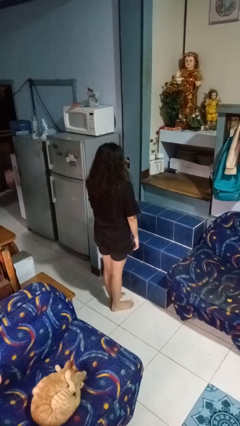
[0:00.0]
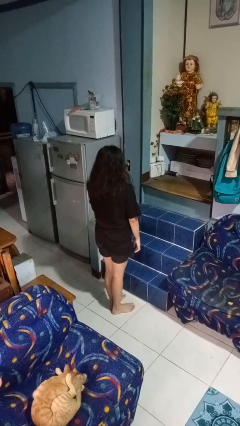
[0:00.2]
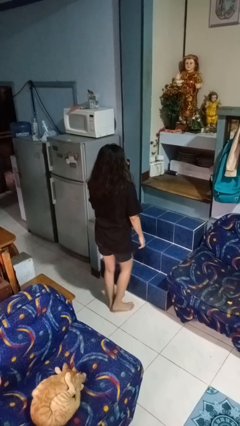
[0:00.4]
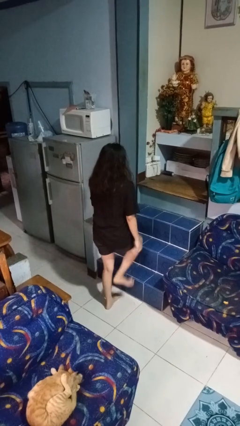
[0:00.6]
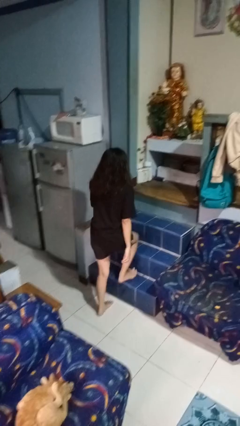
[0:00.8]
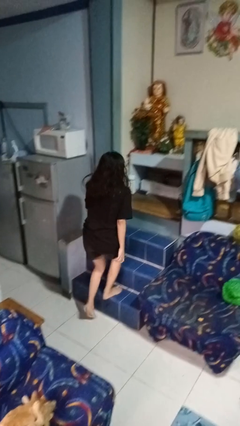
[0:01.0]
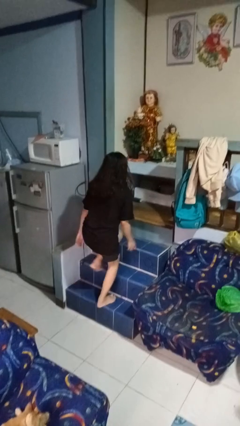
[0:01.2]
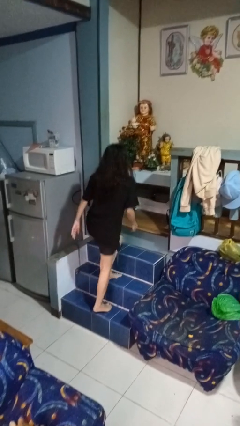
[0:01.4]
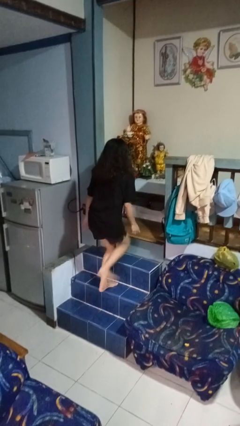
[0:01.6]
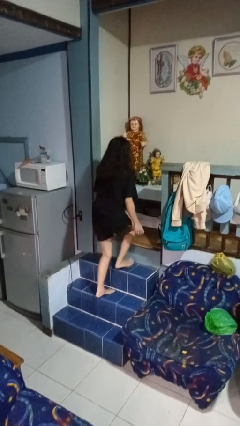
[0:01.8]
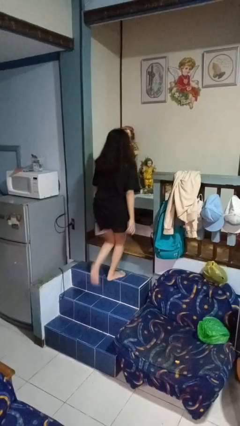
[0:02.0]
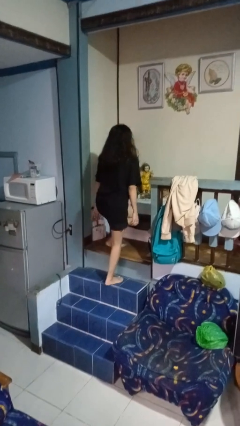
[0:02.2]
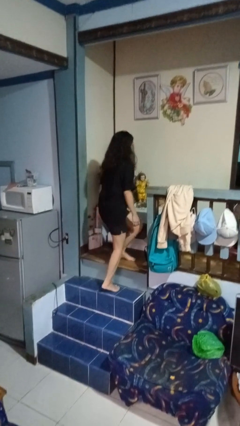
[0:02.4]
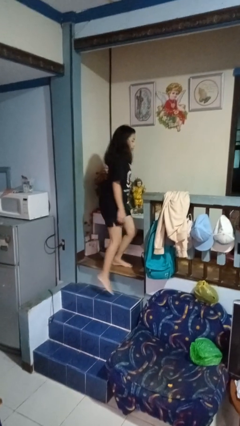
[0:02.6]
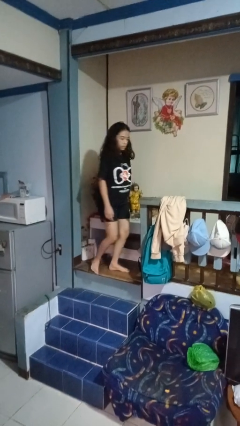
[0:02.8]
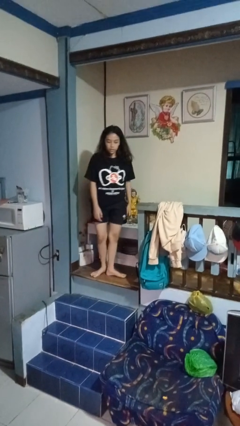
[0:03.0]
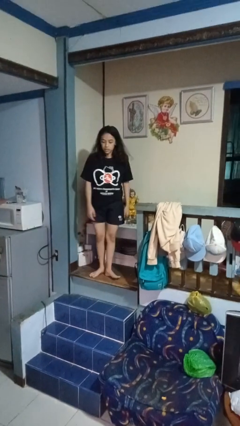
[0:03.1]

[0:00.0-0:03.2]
person climbs up stairs

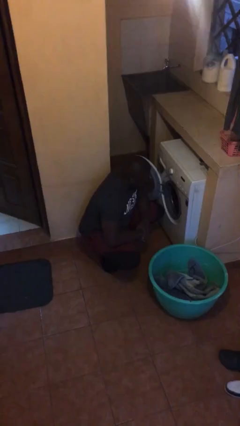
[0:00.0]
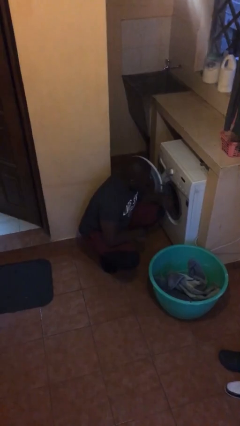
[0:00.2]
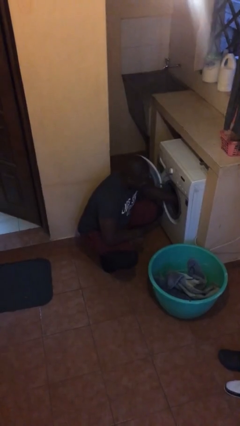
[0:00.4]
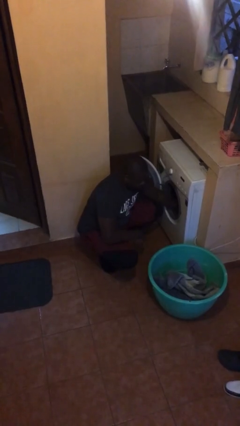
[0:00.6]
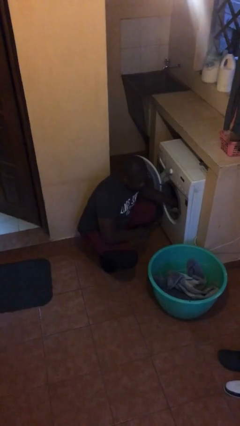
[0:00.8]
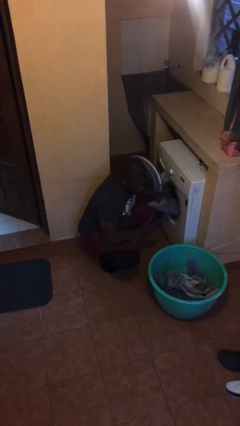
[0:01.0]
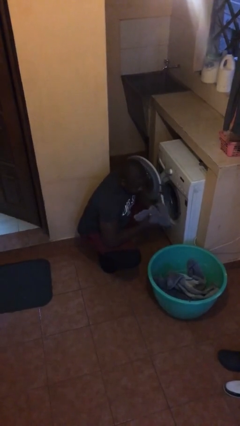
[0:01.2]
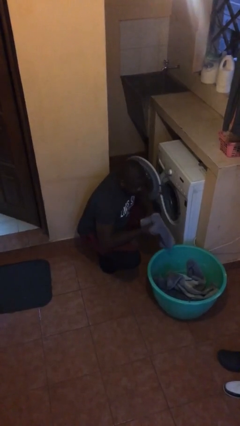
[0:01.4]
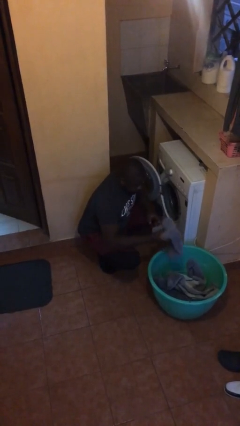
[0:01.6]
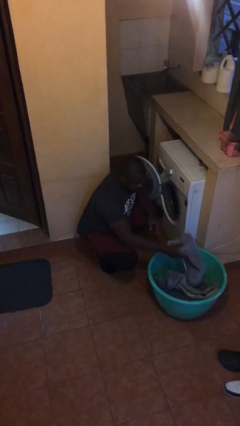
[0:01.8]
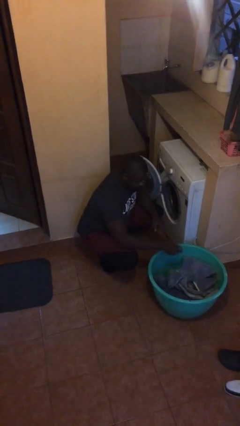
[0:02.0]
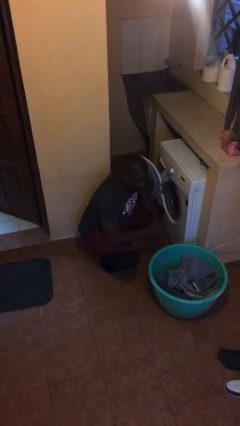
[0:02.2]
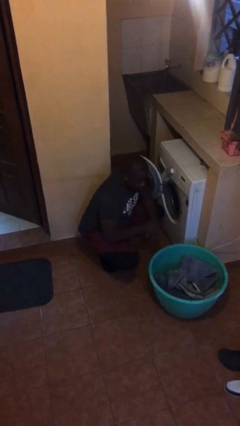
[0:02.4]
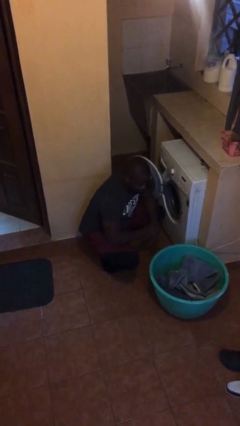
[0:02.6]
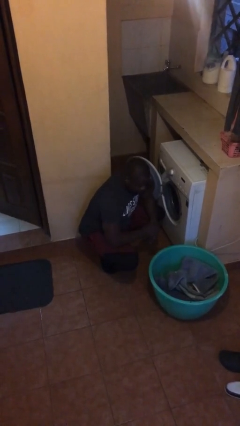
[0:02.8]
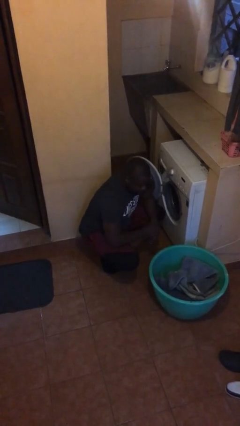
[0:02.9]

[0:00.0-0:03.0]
person unloads dryer

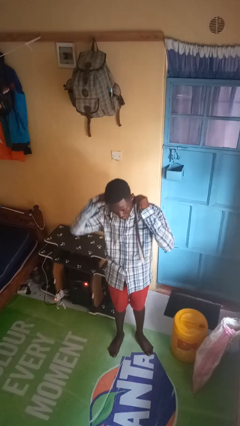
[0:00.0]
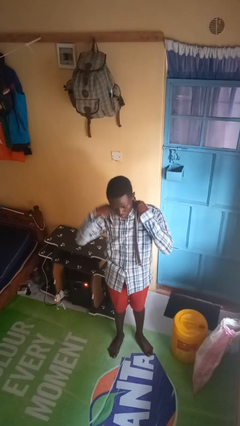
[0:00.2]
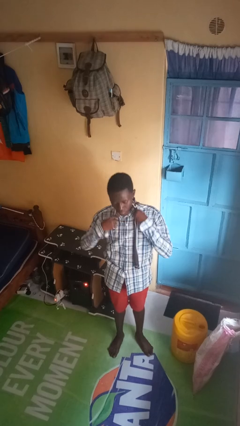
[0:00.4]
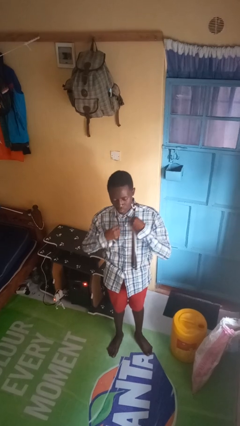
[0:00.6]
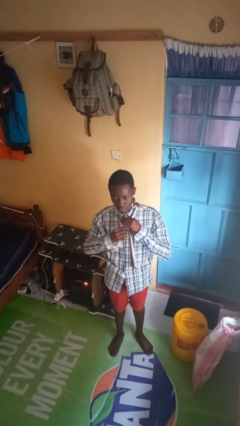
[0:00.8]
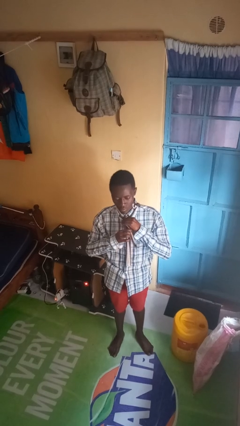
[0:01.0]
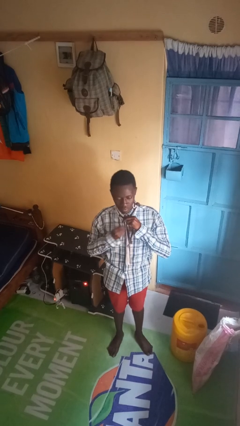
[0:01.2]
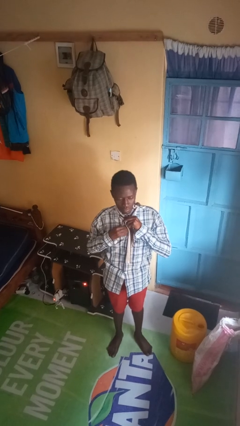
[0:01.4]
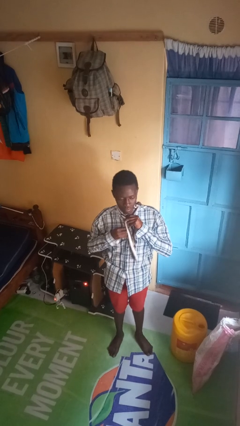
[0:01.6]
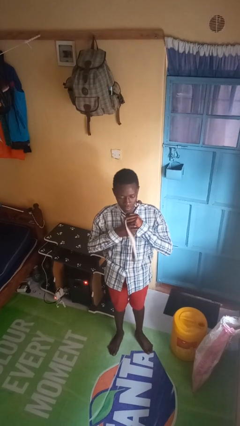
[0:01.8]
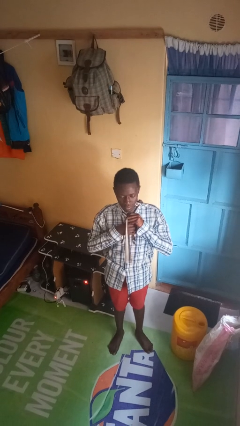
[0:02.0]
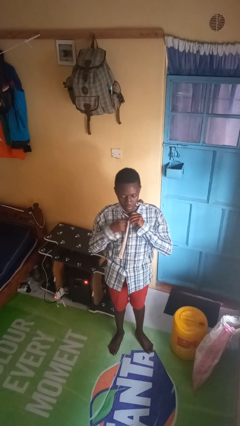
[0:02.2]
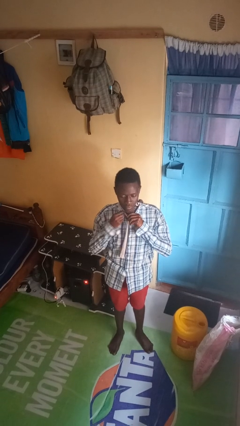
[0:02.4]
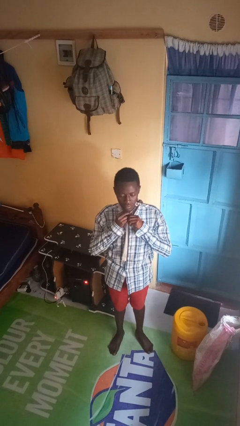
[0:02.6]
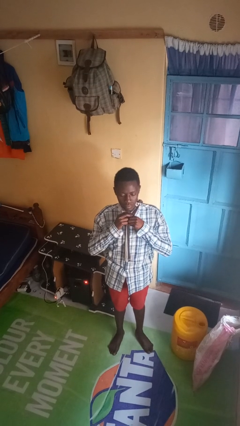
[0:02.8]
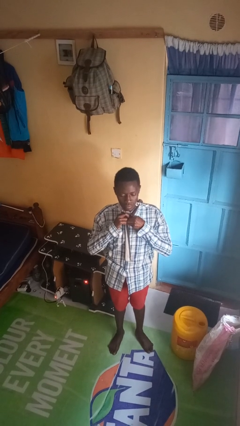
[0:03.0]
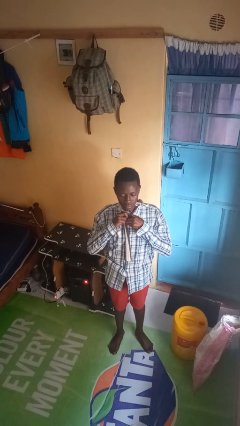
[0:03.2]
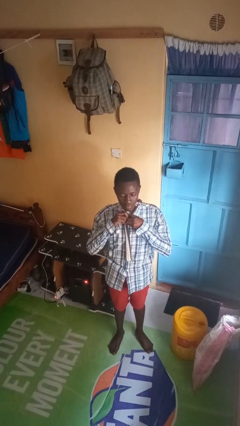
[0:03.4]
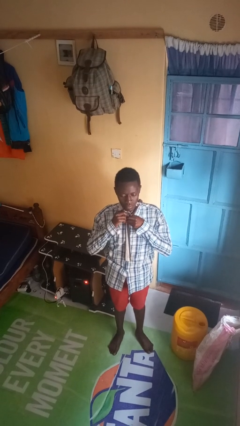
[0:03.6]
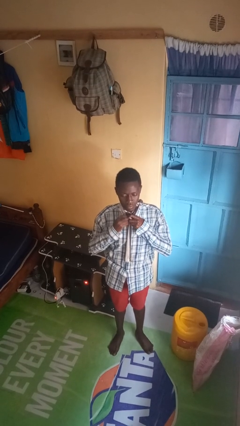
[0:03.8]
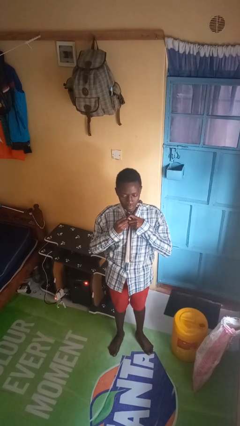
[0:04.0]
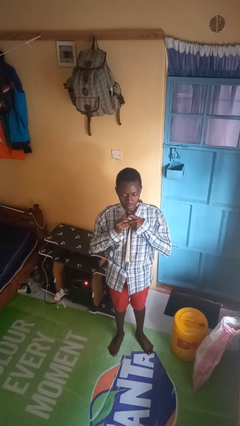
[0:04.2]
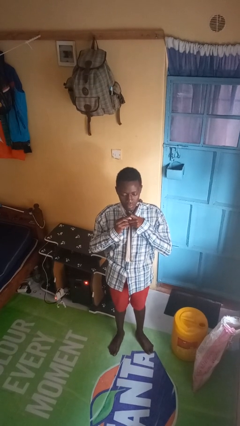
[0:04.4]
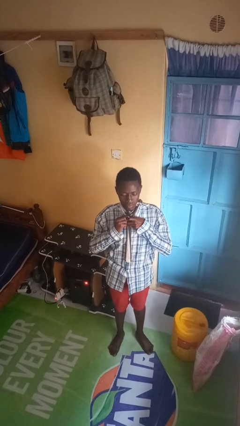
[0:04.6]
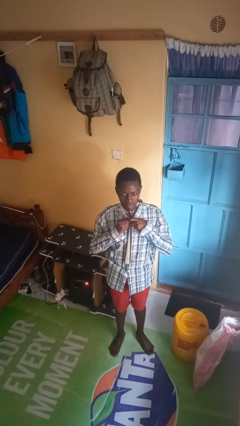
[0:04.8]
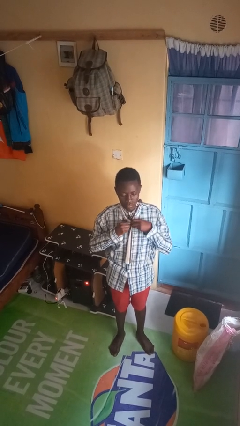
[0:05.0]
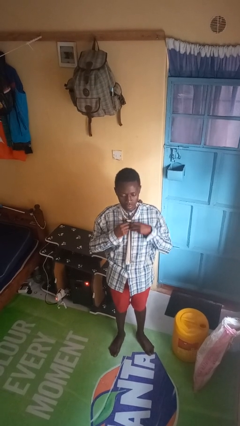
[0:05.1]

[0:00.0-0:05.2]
person puts on necktie

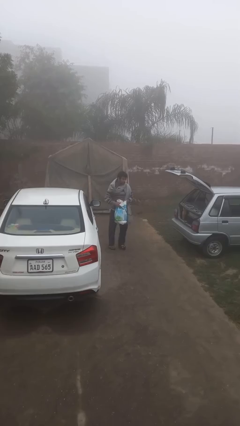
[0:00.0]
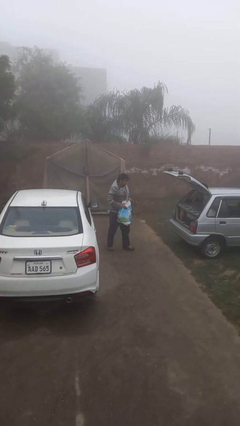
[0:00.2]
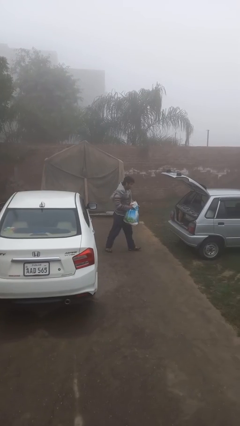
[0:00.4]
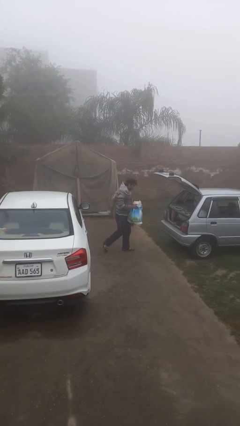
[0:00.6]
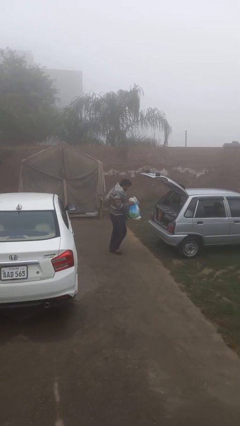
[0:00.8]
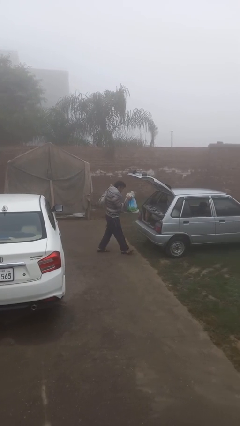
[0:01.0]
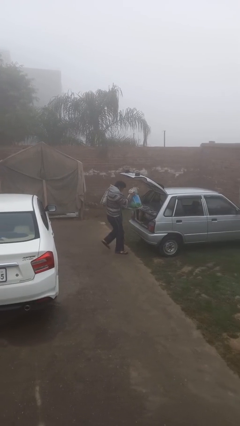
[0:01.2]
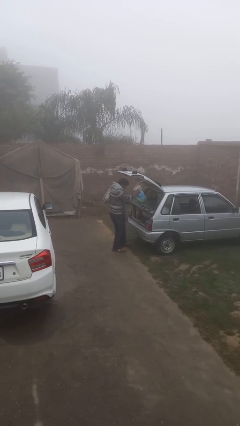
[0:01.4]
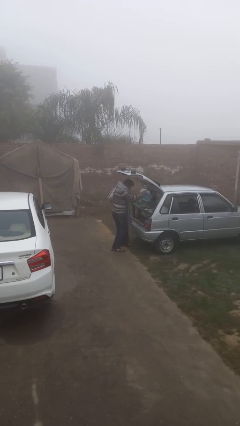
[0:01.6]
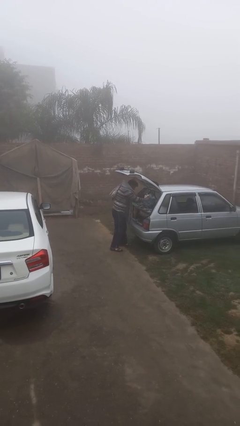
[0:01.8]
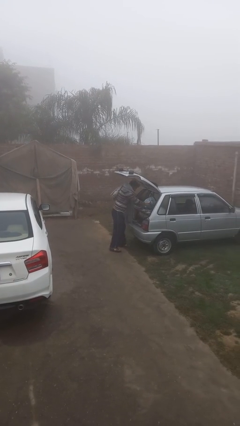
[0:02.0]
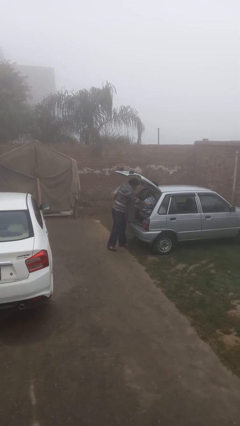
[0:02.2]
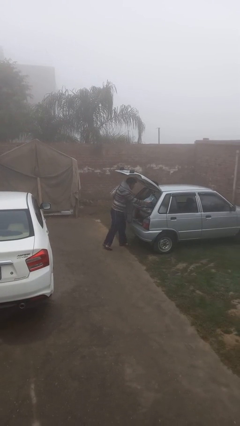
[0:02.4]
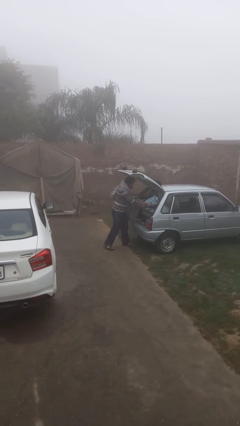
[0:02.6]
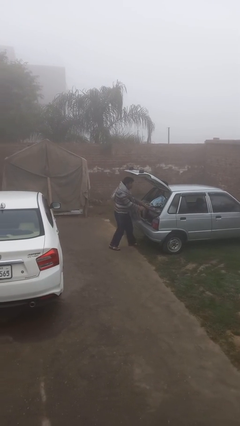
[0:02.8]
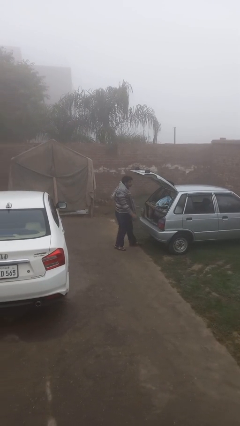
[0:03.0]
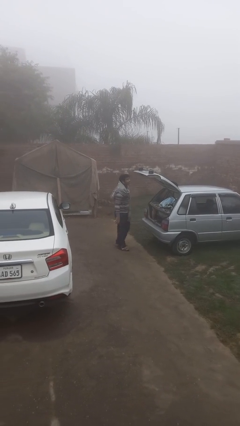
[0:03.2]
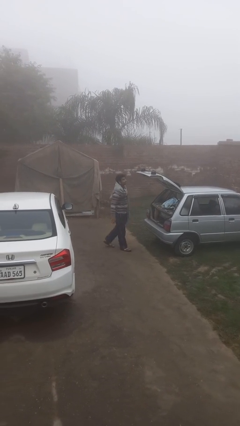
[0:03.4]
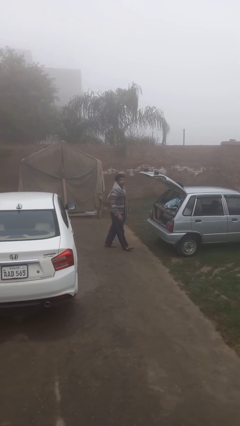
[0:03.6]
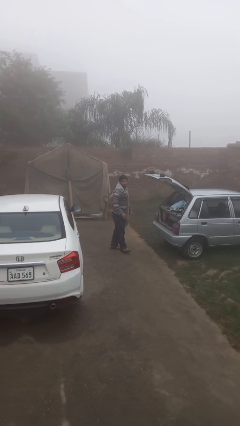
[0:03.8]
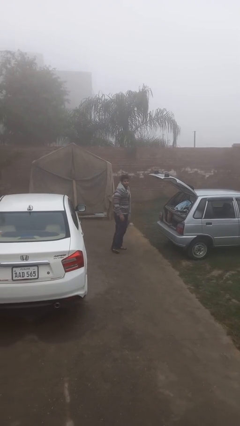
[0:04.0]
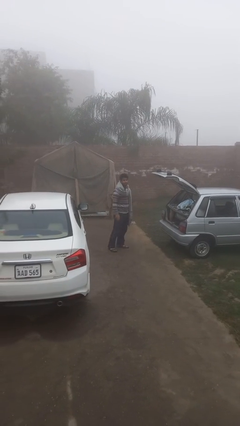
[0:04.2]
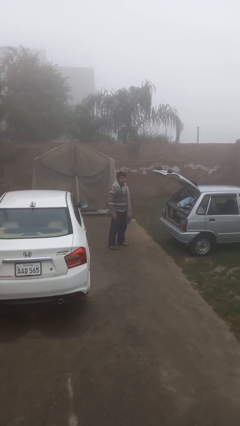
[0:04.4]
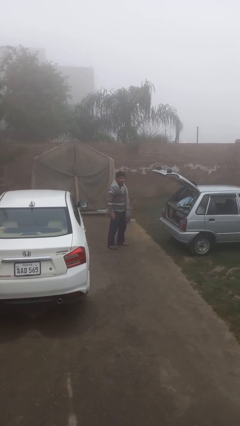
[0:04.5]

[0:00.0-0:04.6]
person loads car

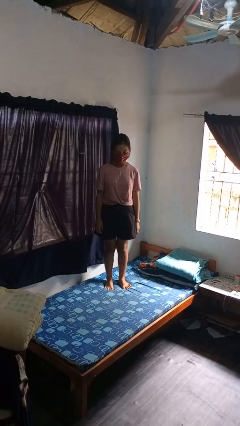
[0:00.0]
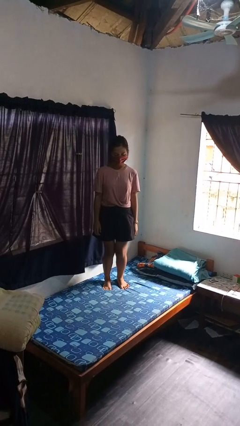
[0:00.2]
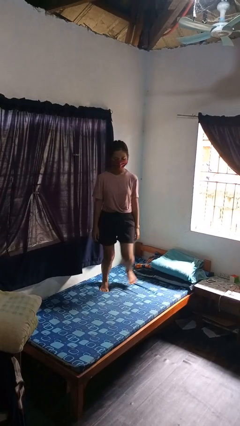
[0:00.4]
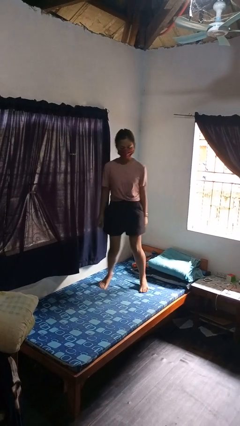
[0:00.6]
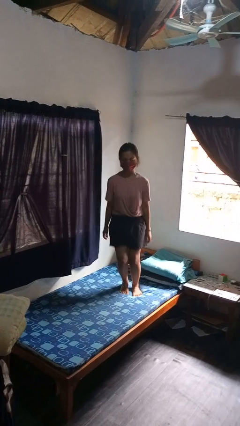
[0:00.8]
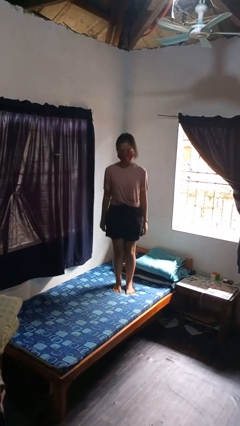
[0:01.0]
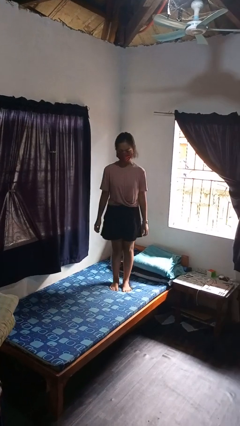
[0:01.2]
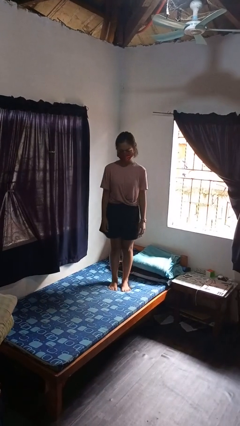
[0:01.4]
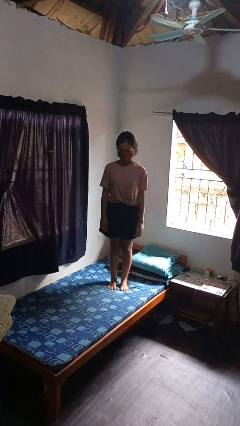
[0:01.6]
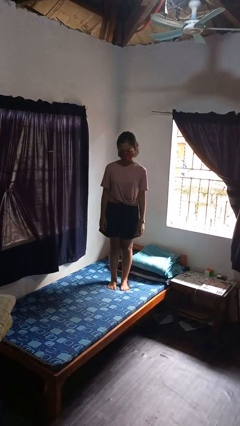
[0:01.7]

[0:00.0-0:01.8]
person jumps on bed
